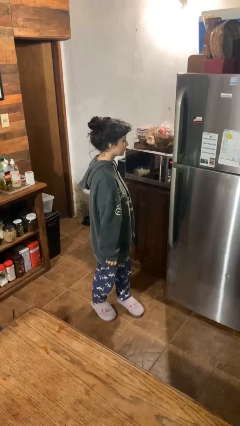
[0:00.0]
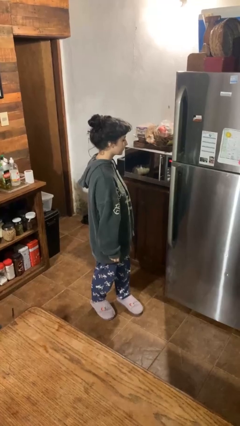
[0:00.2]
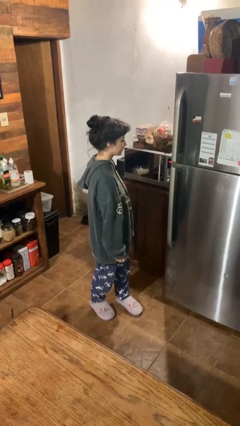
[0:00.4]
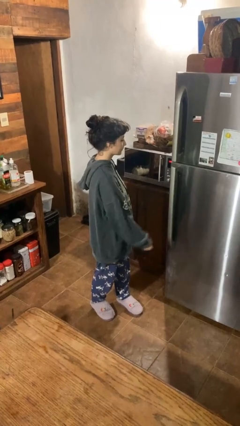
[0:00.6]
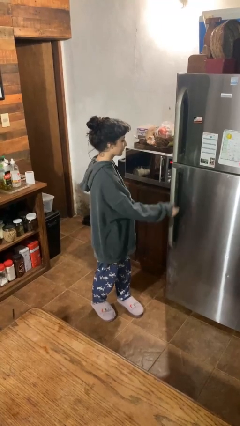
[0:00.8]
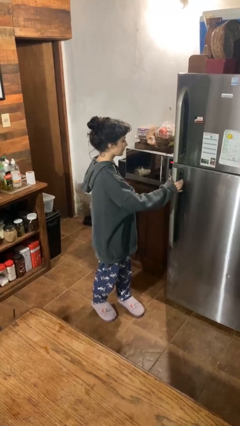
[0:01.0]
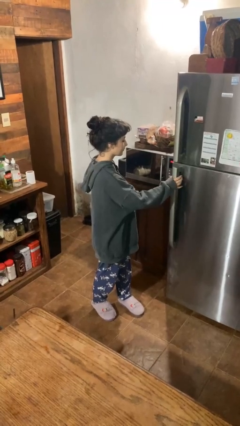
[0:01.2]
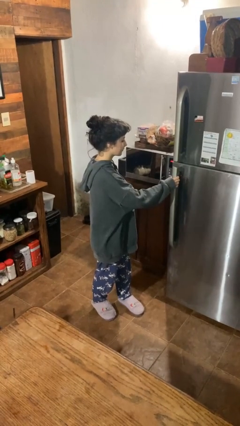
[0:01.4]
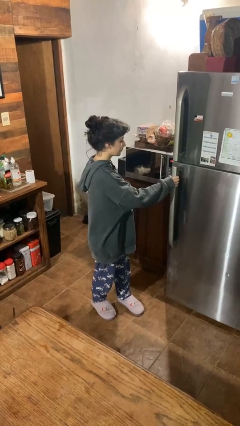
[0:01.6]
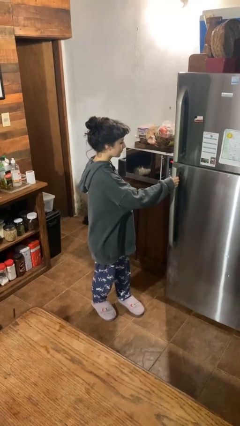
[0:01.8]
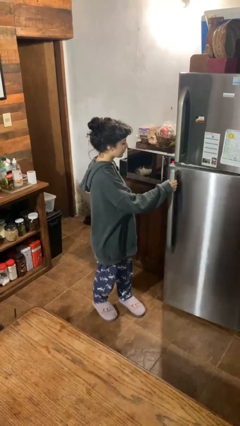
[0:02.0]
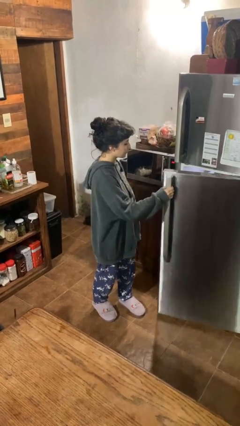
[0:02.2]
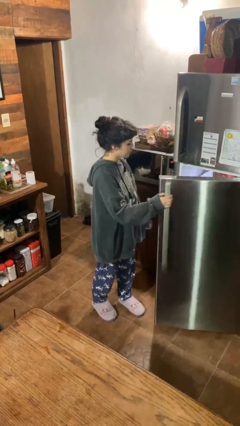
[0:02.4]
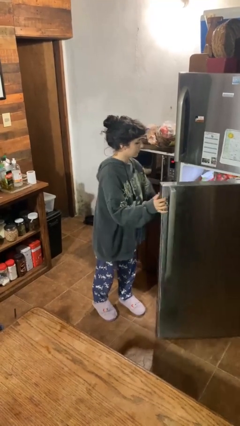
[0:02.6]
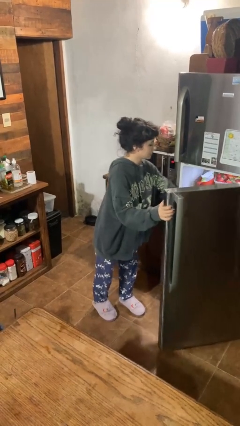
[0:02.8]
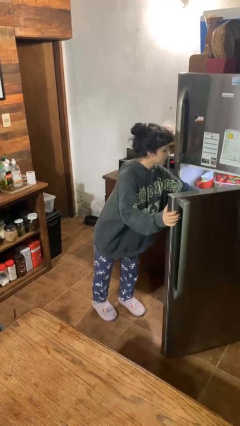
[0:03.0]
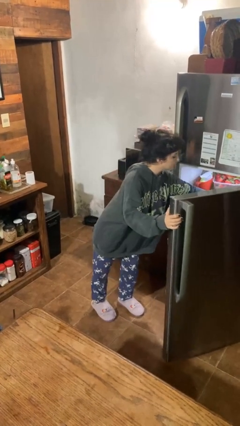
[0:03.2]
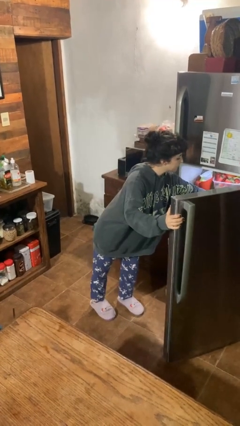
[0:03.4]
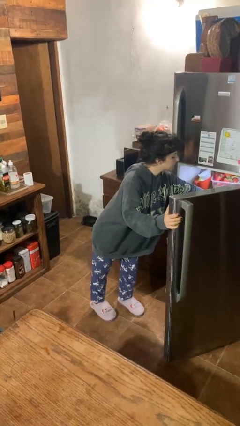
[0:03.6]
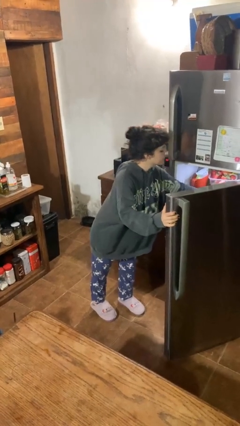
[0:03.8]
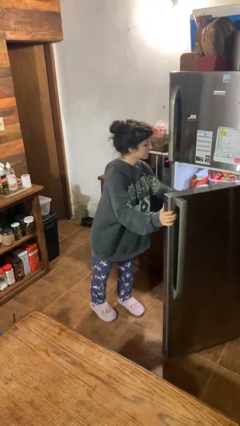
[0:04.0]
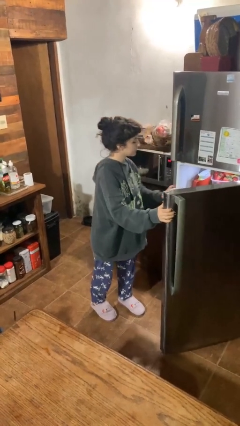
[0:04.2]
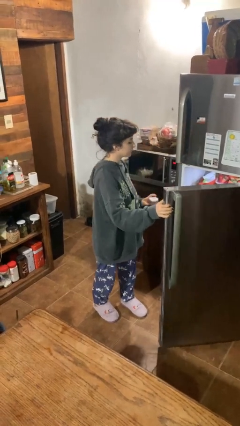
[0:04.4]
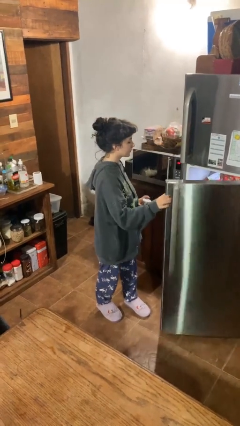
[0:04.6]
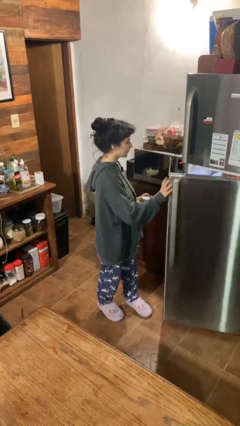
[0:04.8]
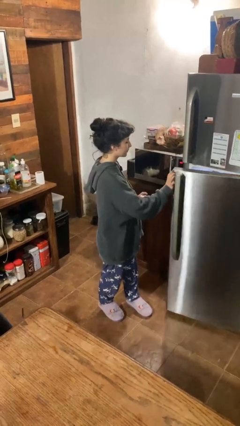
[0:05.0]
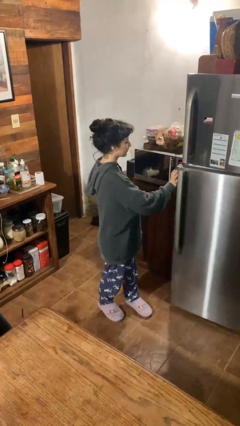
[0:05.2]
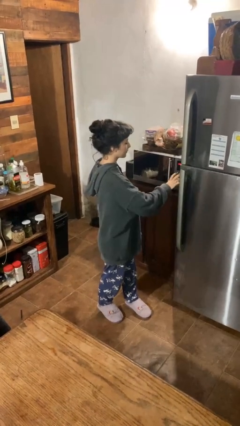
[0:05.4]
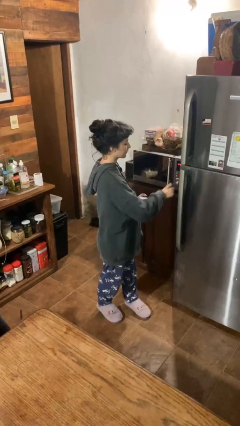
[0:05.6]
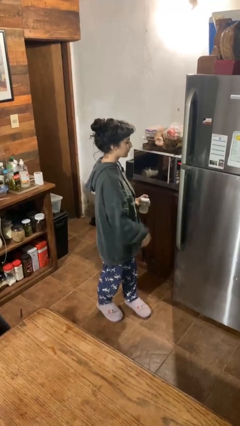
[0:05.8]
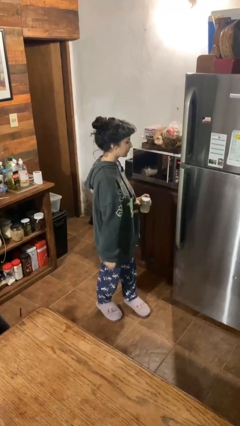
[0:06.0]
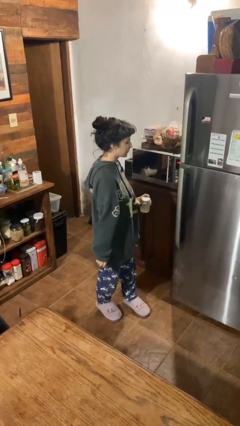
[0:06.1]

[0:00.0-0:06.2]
person takes object from refrigerator

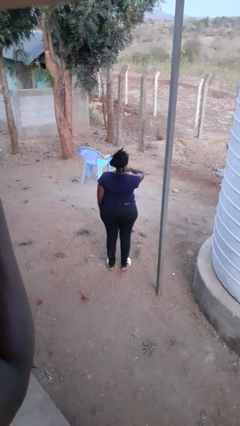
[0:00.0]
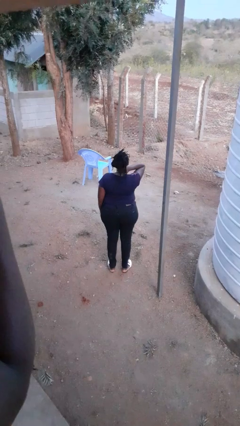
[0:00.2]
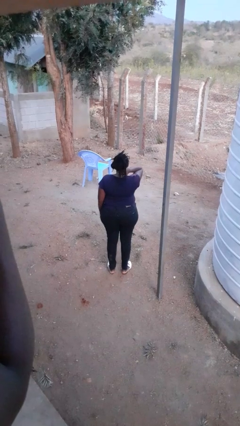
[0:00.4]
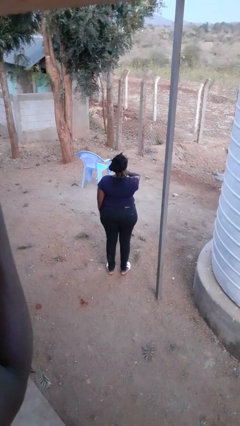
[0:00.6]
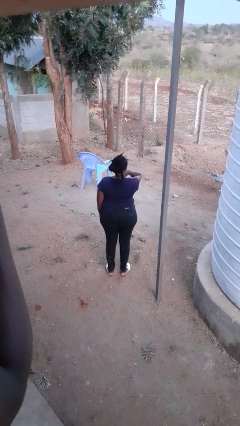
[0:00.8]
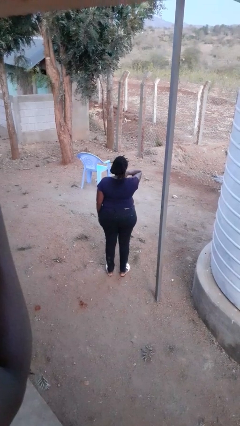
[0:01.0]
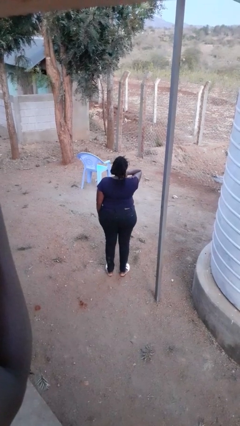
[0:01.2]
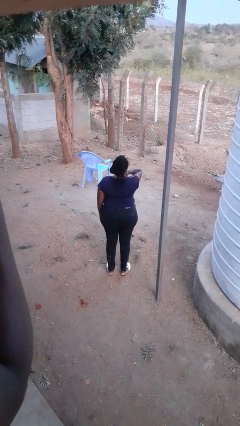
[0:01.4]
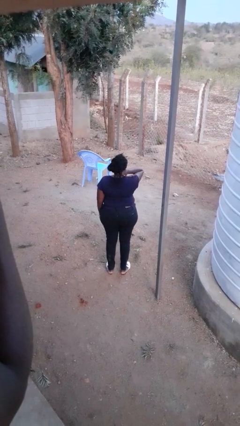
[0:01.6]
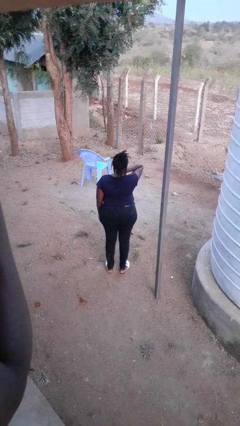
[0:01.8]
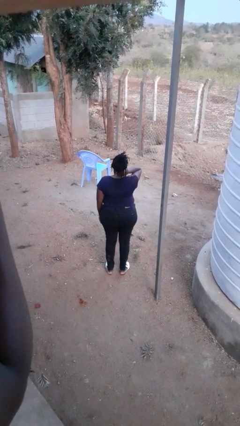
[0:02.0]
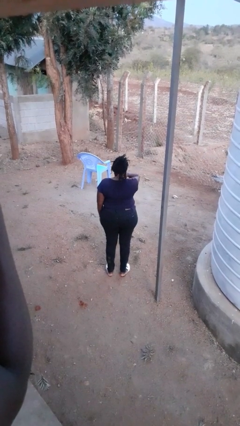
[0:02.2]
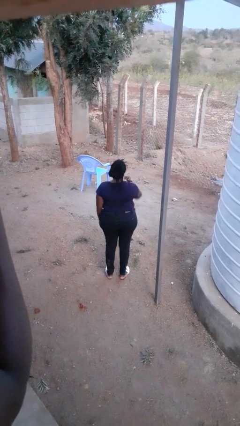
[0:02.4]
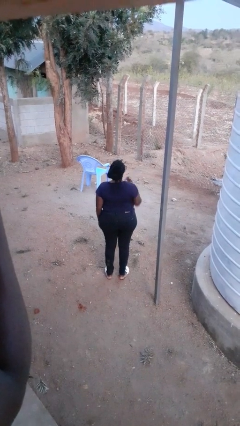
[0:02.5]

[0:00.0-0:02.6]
person rubs neck

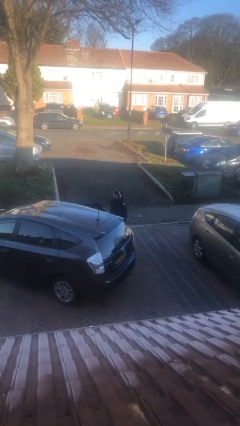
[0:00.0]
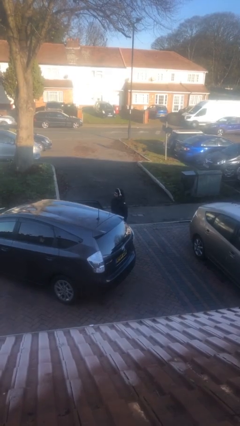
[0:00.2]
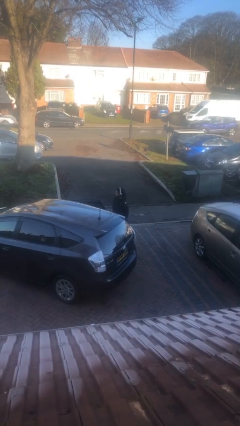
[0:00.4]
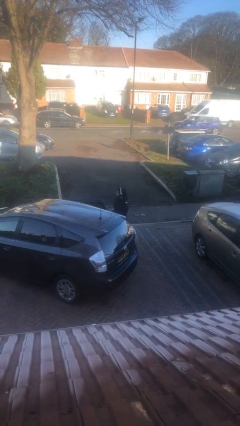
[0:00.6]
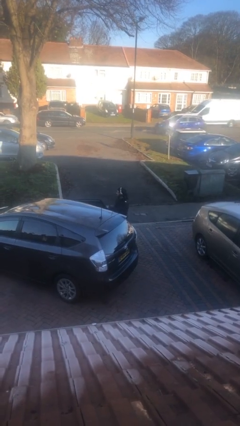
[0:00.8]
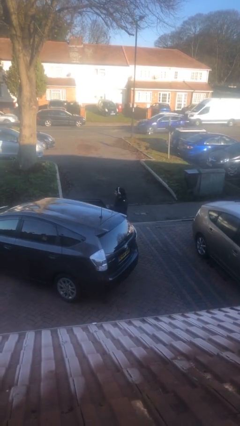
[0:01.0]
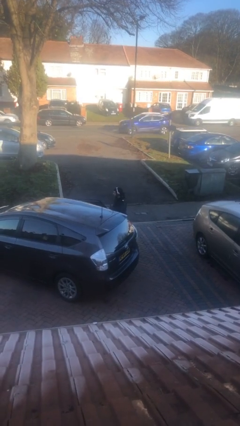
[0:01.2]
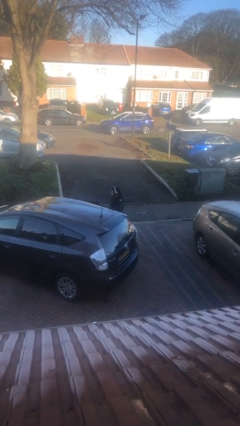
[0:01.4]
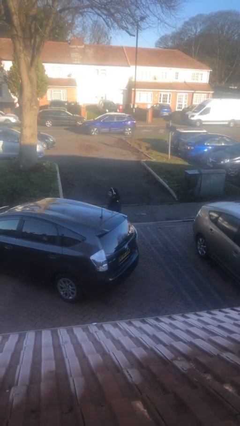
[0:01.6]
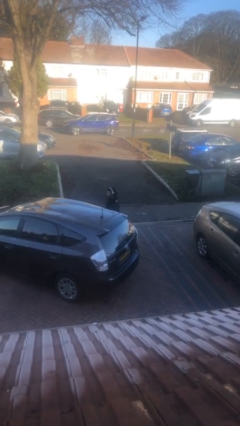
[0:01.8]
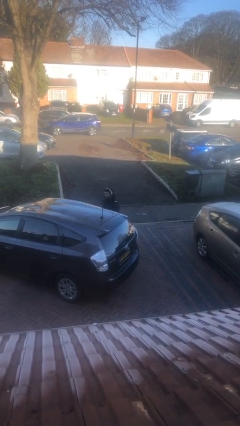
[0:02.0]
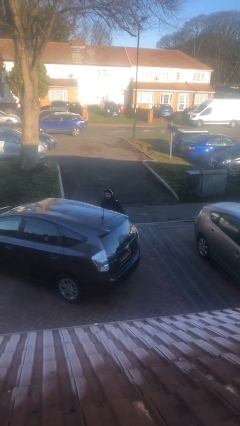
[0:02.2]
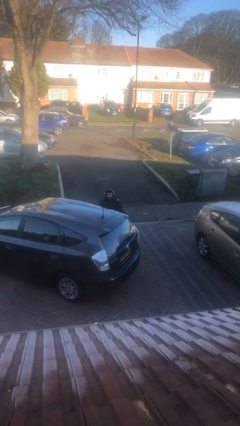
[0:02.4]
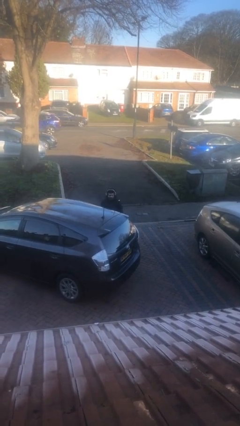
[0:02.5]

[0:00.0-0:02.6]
person closes car door

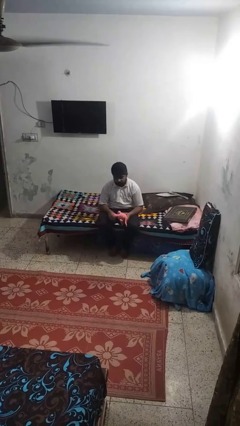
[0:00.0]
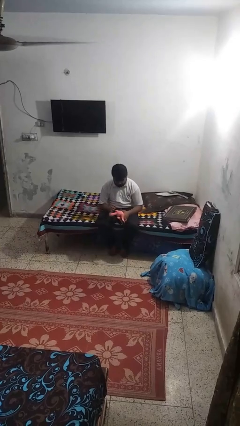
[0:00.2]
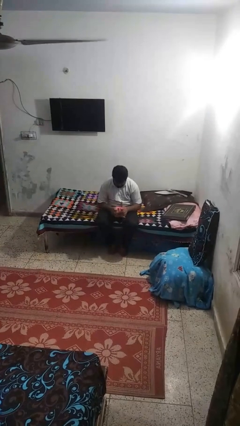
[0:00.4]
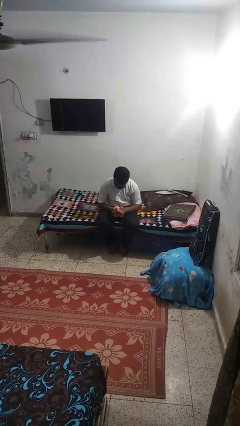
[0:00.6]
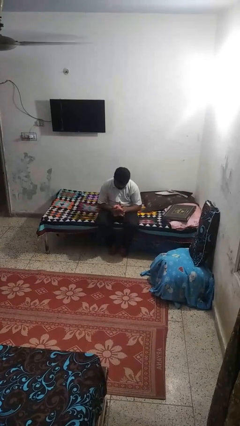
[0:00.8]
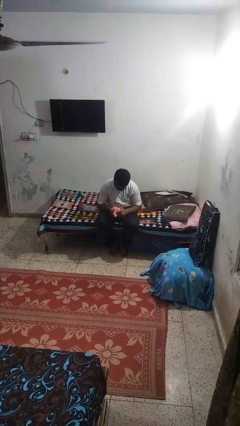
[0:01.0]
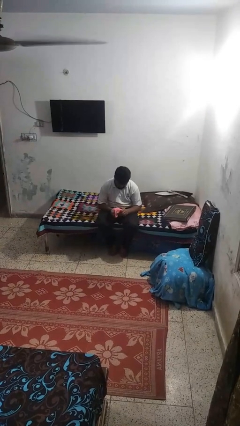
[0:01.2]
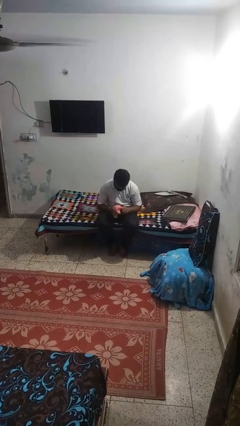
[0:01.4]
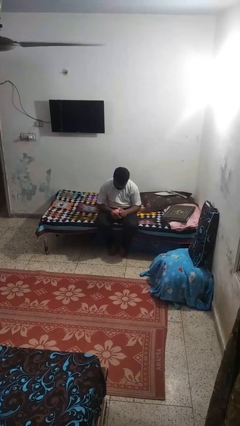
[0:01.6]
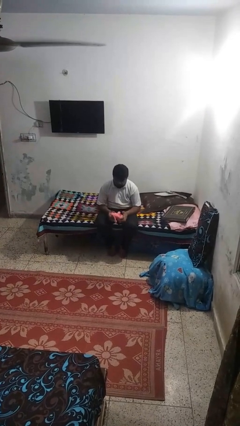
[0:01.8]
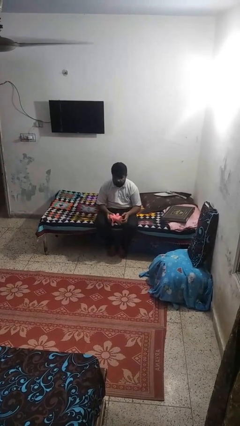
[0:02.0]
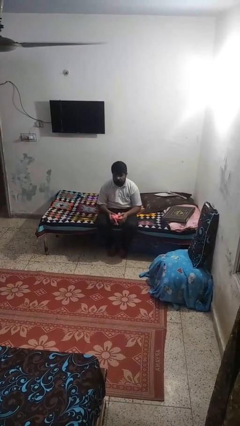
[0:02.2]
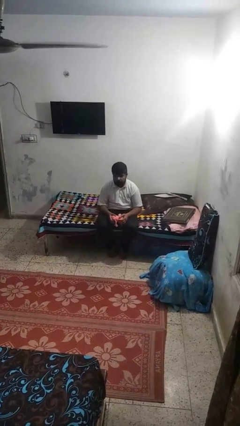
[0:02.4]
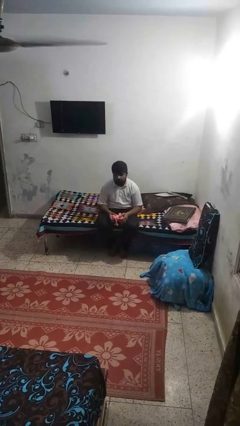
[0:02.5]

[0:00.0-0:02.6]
person squeezes object

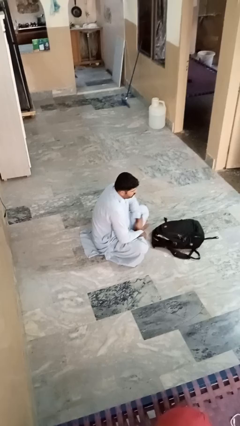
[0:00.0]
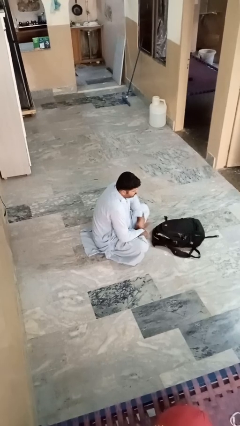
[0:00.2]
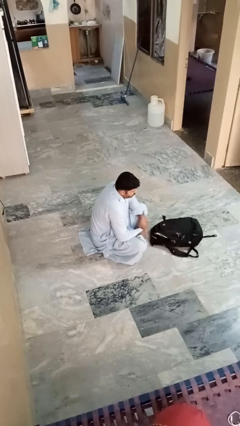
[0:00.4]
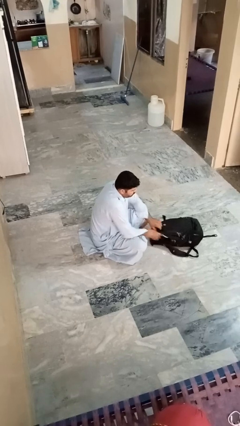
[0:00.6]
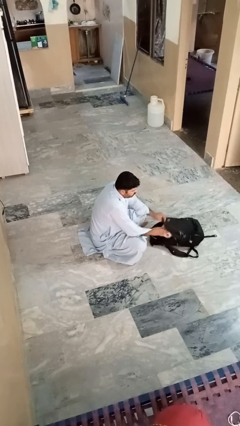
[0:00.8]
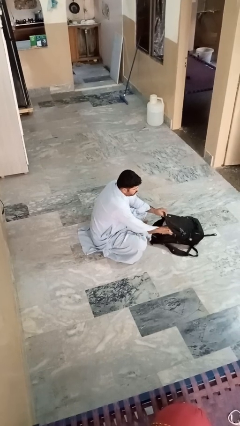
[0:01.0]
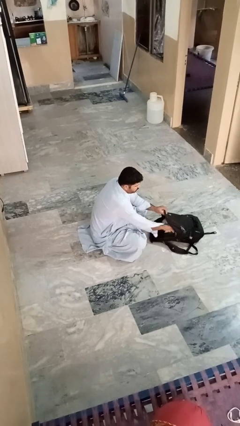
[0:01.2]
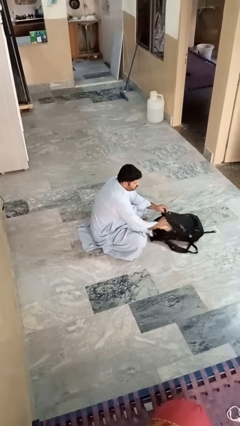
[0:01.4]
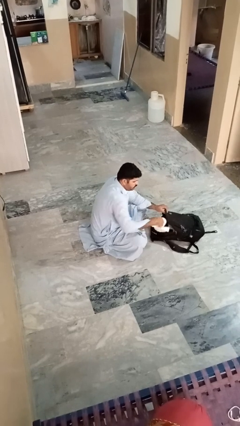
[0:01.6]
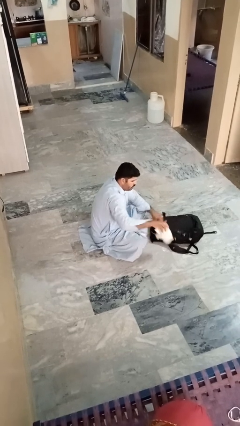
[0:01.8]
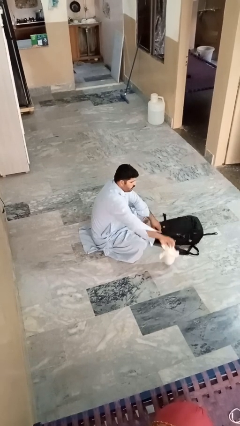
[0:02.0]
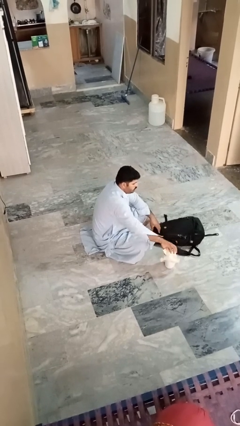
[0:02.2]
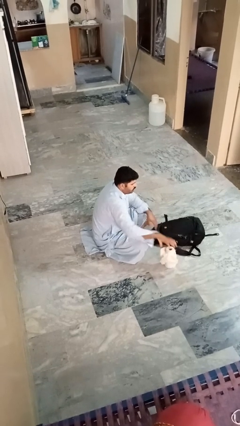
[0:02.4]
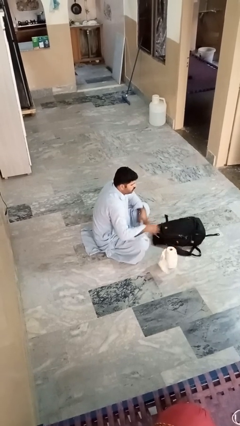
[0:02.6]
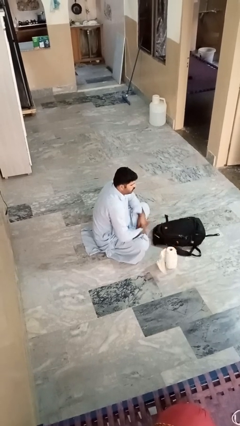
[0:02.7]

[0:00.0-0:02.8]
person takes object from bag

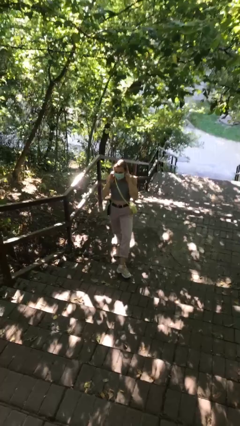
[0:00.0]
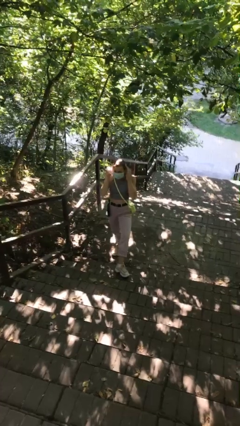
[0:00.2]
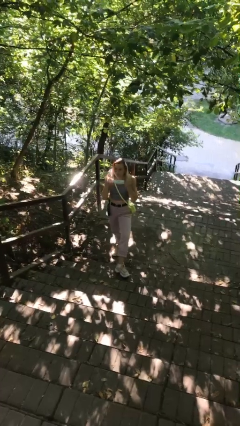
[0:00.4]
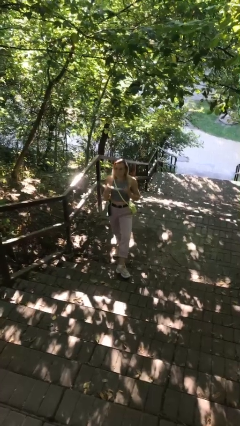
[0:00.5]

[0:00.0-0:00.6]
person takes off facemask
